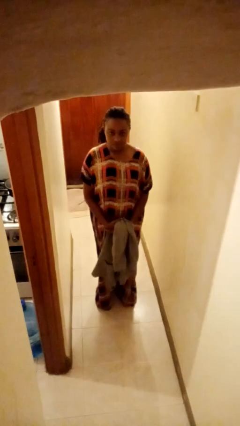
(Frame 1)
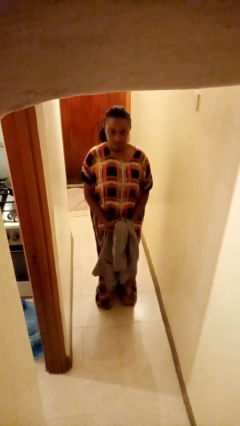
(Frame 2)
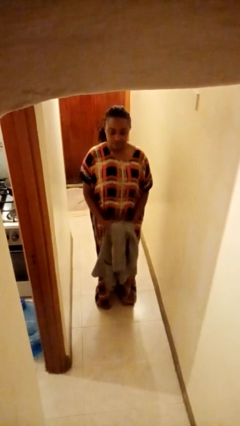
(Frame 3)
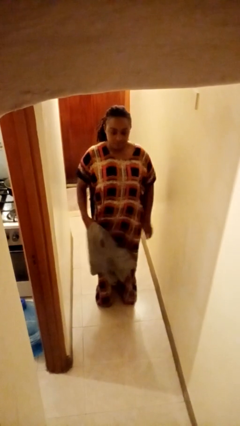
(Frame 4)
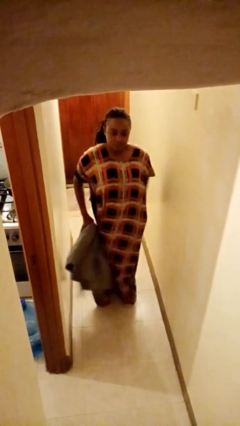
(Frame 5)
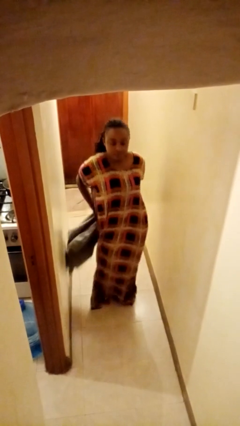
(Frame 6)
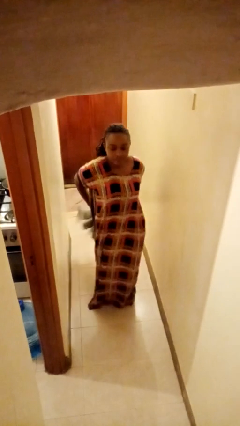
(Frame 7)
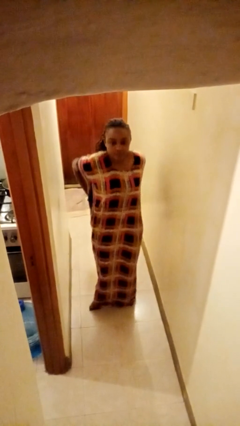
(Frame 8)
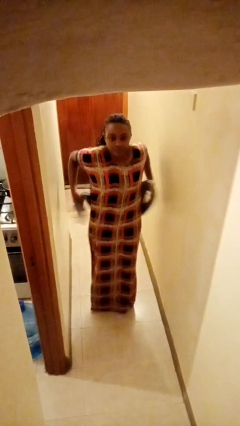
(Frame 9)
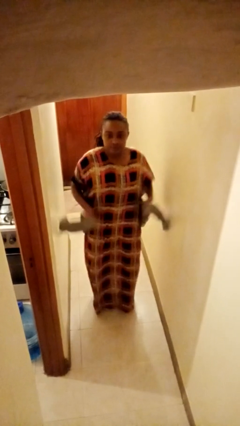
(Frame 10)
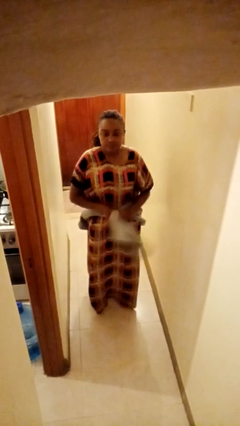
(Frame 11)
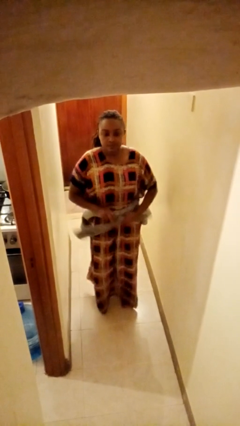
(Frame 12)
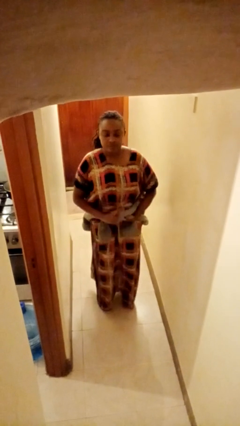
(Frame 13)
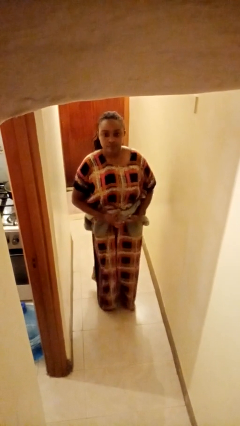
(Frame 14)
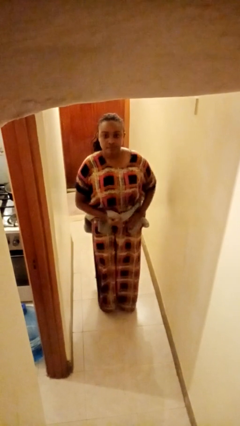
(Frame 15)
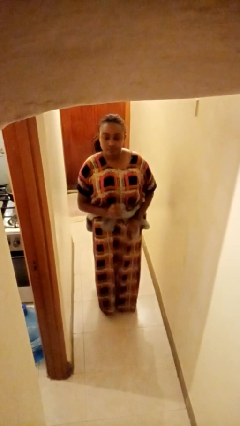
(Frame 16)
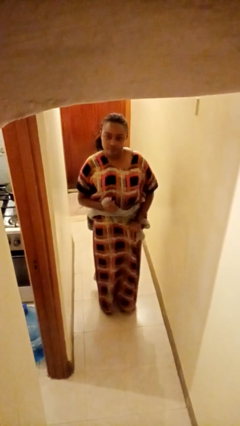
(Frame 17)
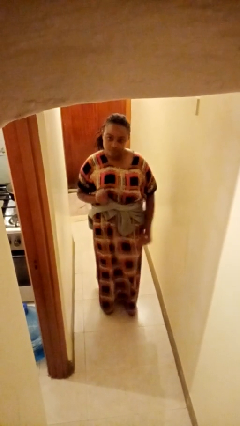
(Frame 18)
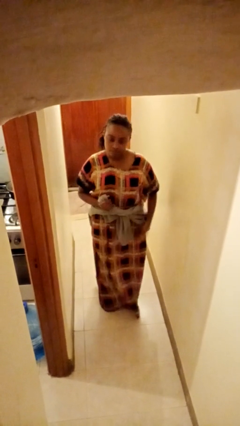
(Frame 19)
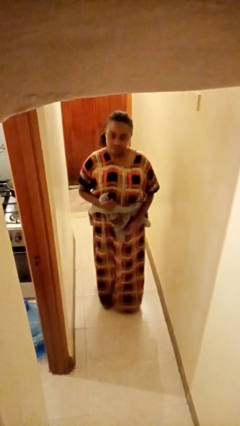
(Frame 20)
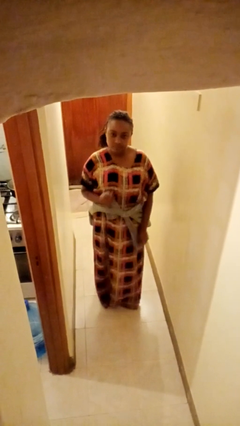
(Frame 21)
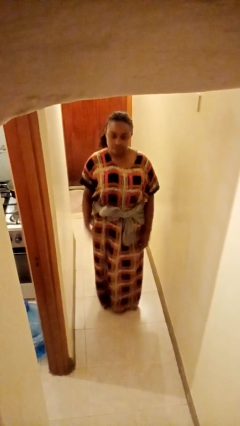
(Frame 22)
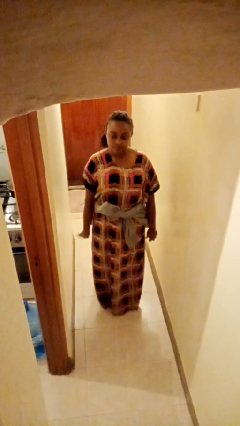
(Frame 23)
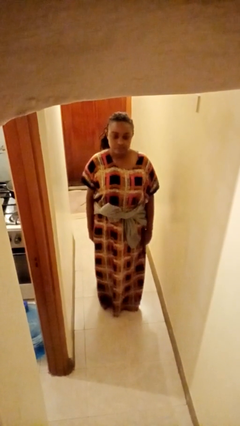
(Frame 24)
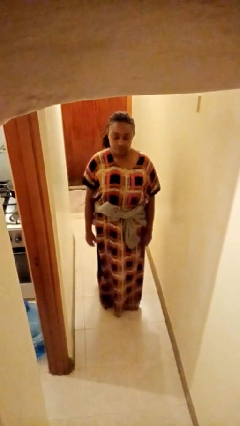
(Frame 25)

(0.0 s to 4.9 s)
person ties jacket around waist

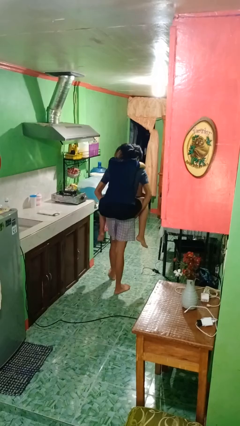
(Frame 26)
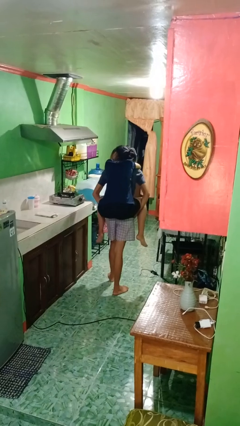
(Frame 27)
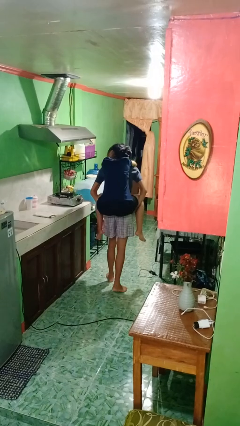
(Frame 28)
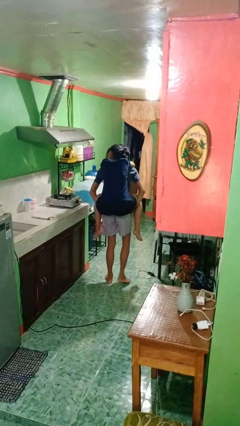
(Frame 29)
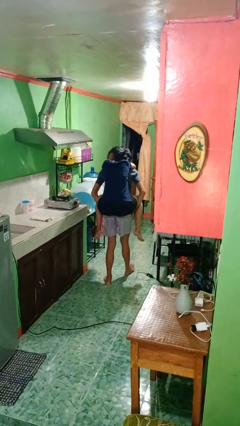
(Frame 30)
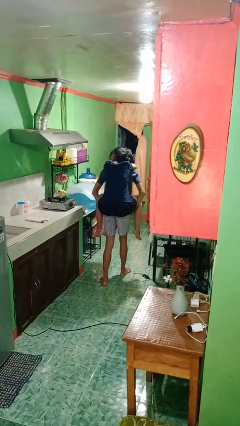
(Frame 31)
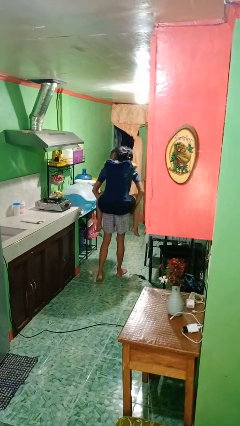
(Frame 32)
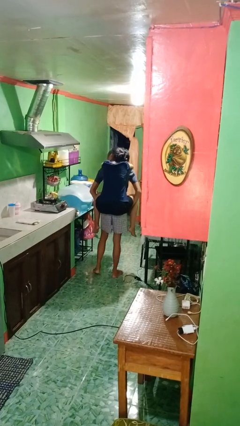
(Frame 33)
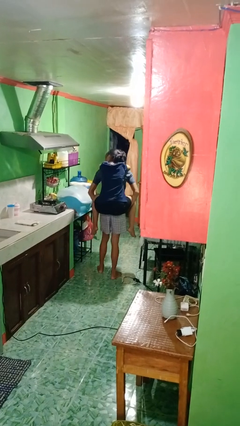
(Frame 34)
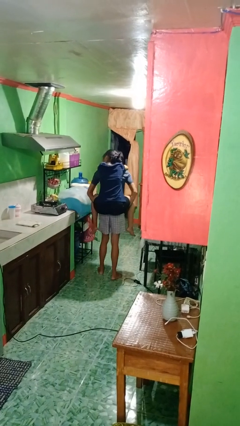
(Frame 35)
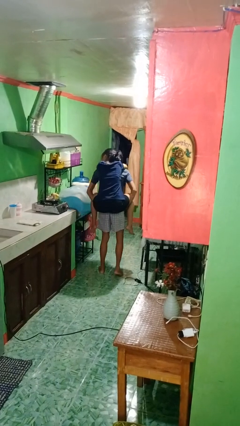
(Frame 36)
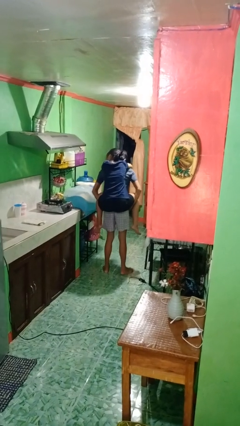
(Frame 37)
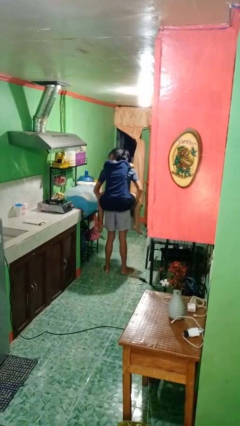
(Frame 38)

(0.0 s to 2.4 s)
person carries person on back

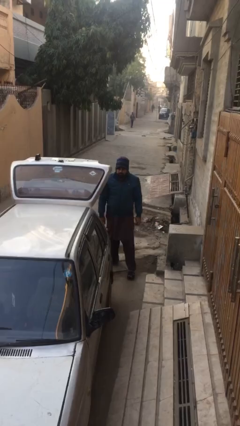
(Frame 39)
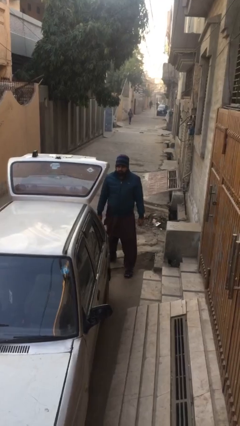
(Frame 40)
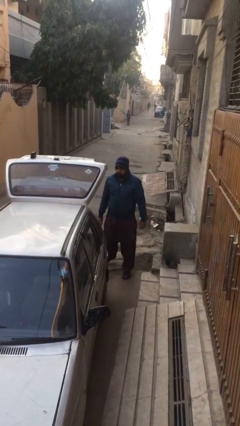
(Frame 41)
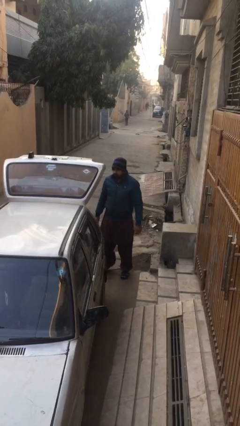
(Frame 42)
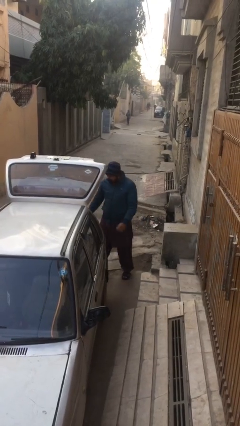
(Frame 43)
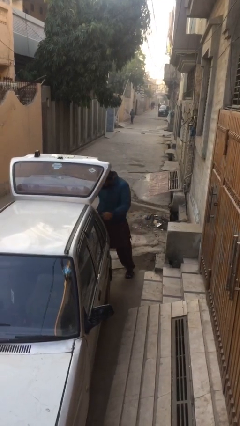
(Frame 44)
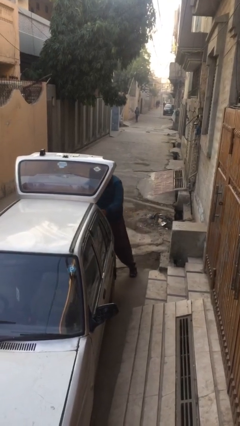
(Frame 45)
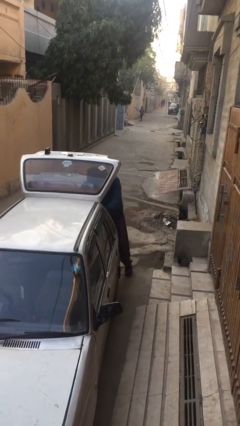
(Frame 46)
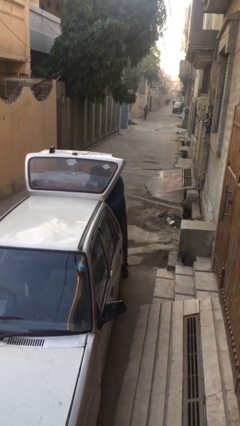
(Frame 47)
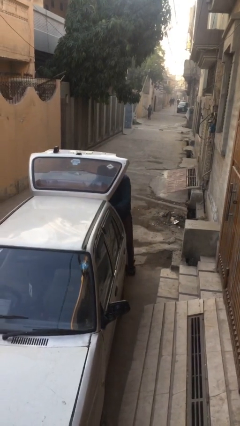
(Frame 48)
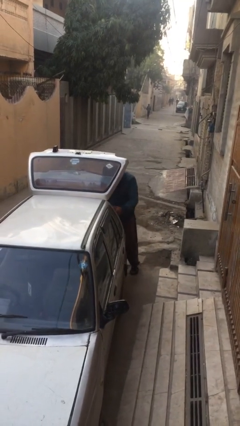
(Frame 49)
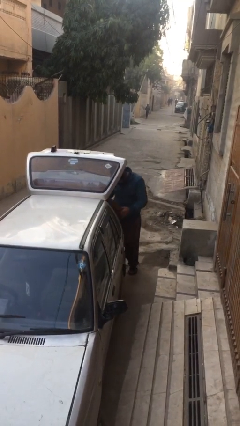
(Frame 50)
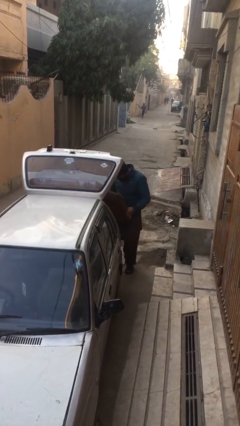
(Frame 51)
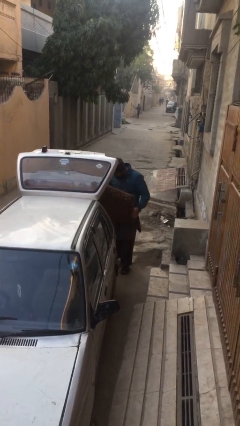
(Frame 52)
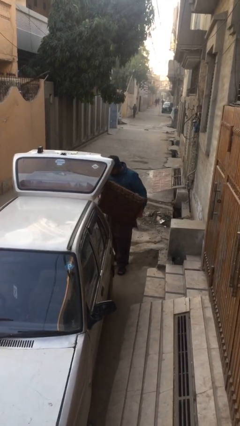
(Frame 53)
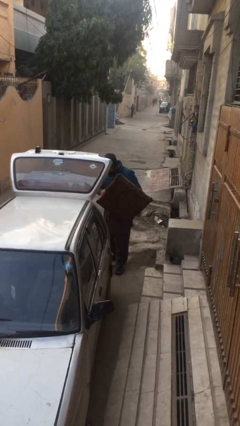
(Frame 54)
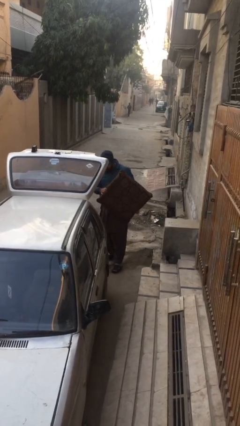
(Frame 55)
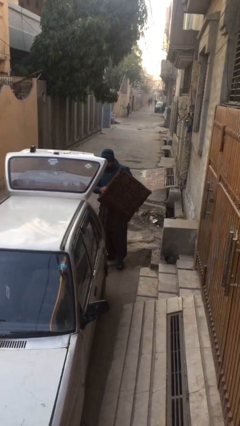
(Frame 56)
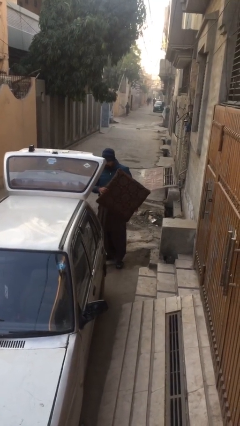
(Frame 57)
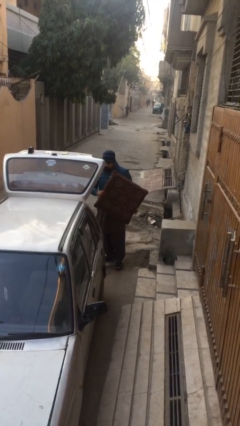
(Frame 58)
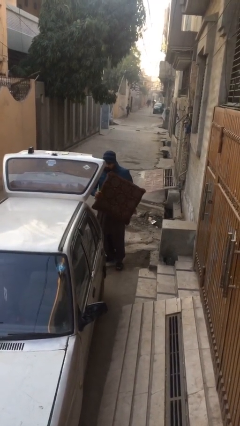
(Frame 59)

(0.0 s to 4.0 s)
person unloads car

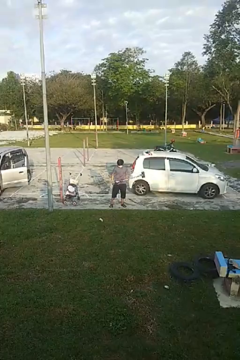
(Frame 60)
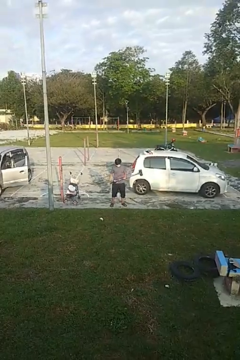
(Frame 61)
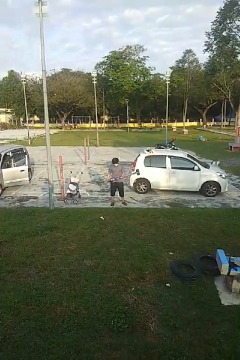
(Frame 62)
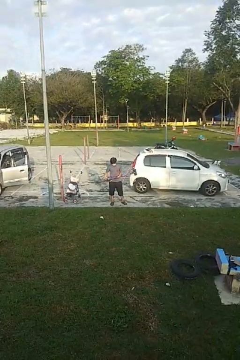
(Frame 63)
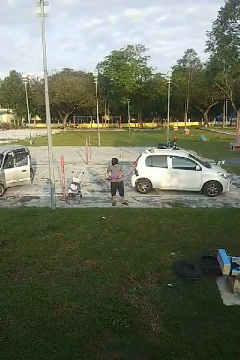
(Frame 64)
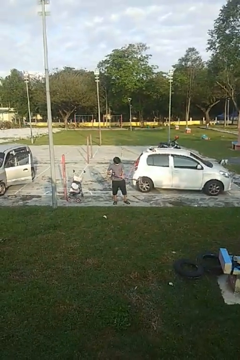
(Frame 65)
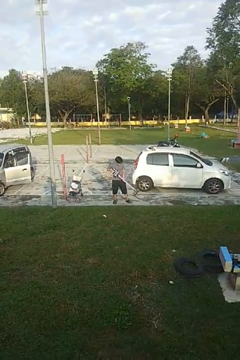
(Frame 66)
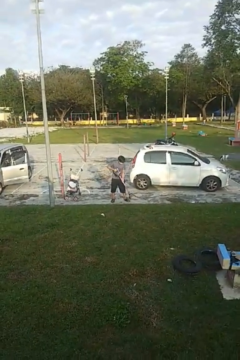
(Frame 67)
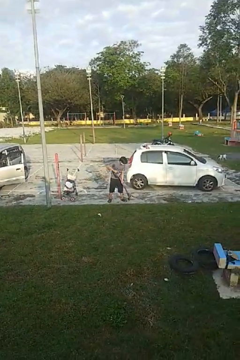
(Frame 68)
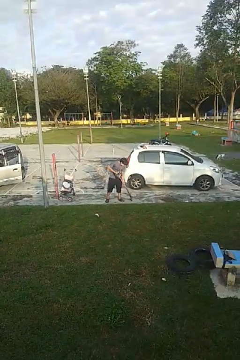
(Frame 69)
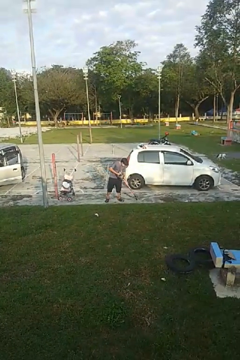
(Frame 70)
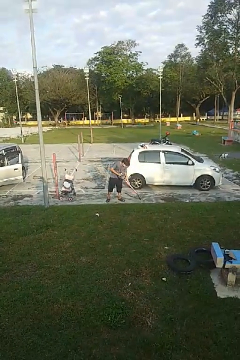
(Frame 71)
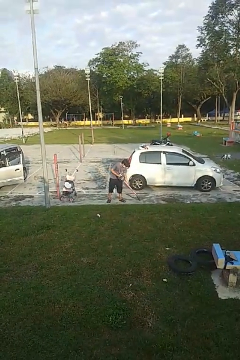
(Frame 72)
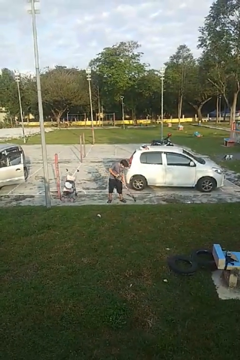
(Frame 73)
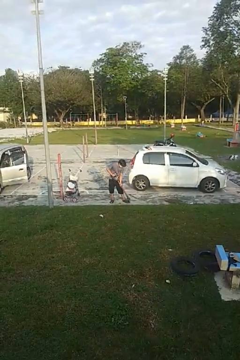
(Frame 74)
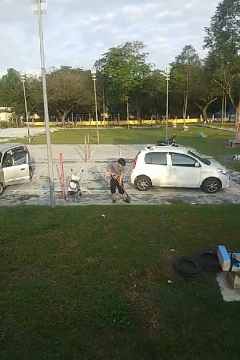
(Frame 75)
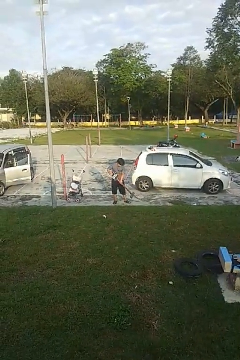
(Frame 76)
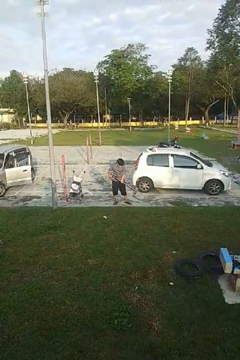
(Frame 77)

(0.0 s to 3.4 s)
person vacuums carpet

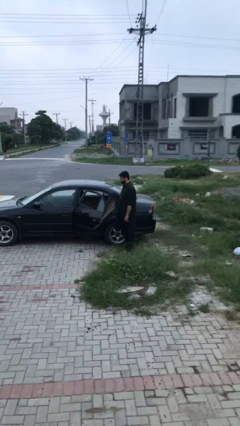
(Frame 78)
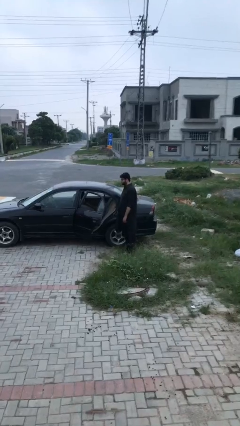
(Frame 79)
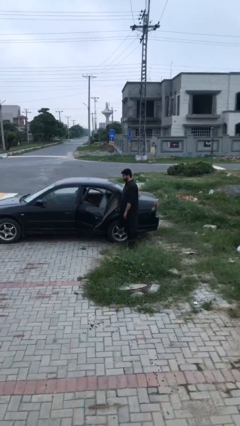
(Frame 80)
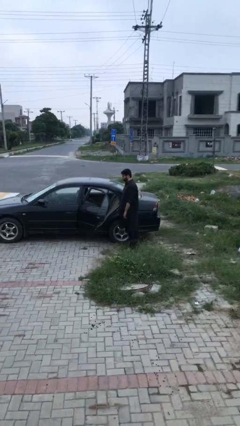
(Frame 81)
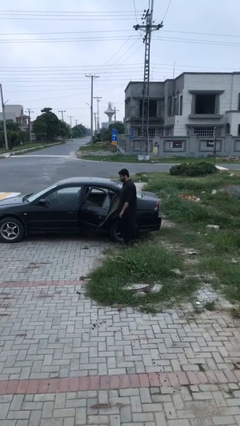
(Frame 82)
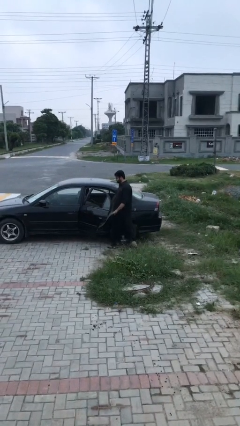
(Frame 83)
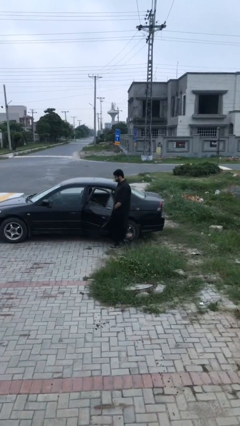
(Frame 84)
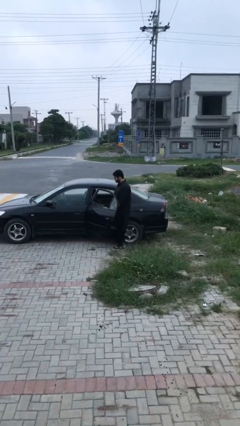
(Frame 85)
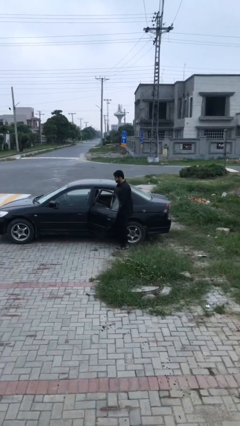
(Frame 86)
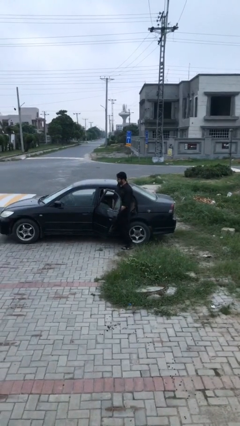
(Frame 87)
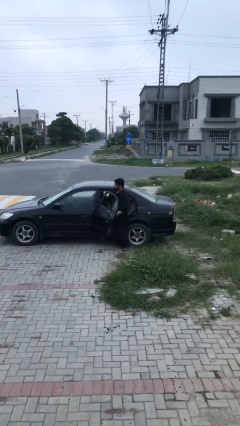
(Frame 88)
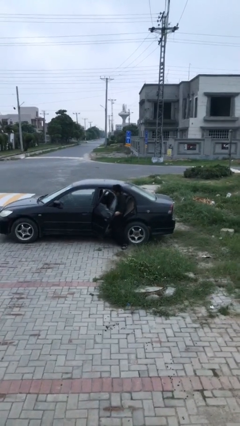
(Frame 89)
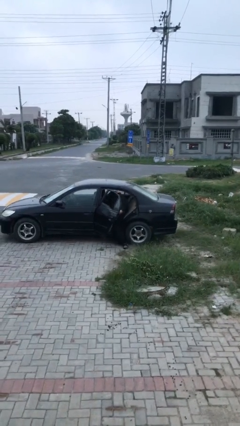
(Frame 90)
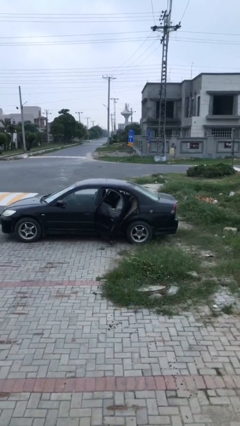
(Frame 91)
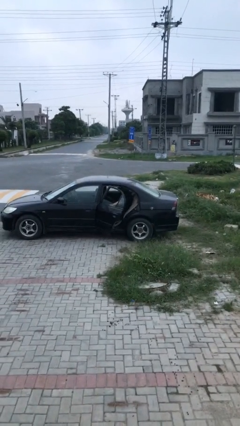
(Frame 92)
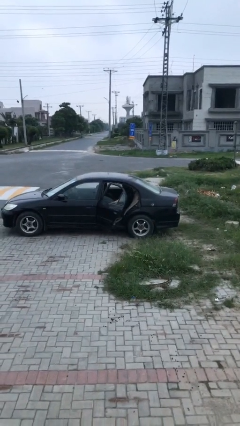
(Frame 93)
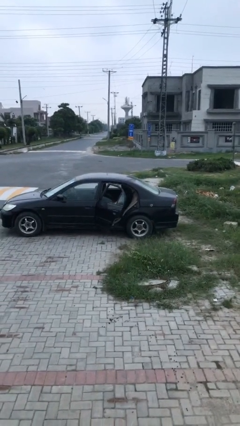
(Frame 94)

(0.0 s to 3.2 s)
person enters car
